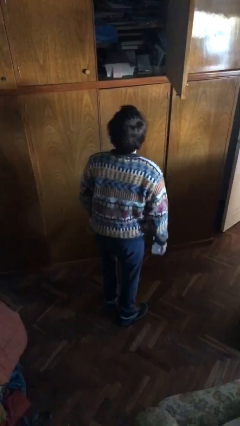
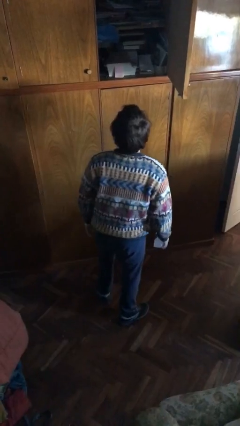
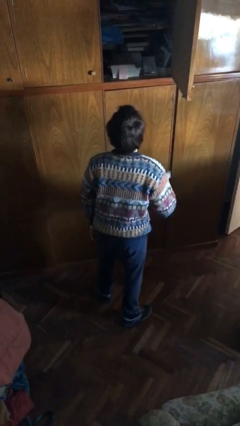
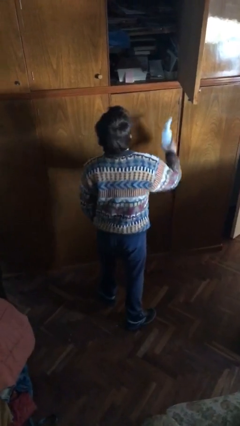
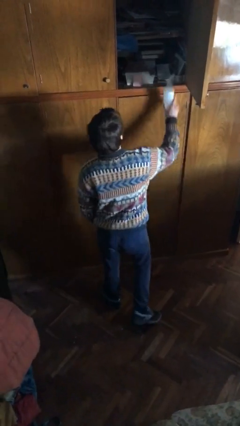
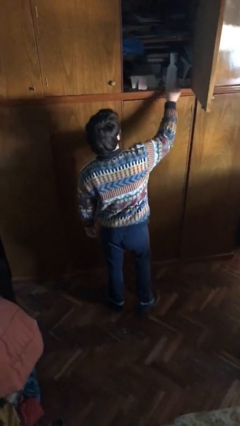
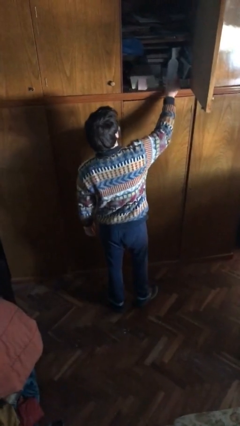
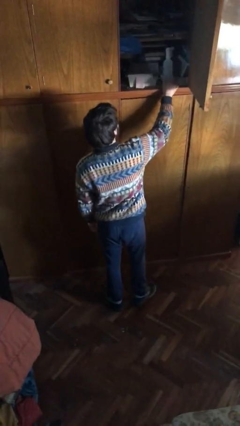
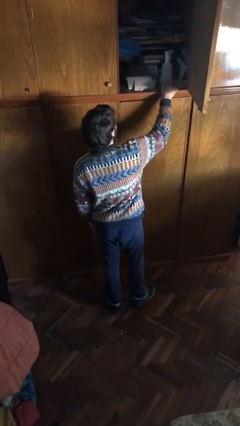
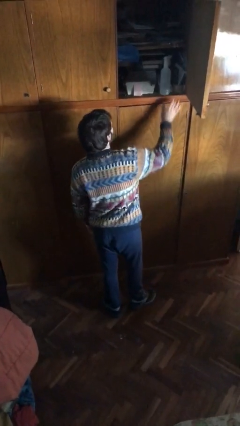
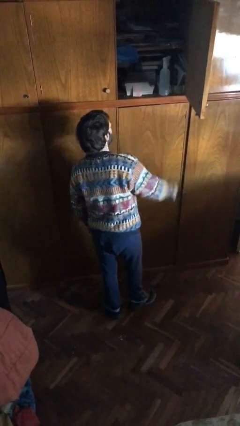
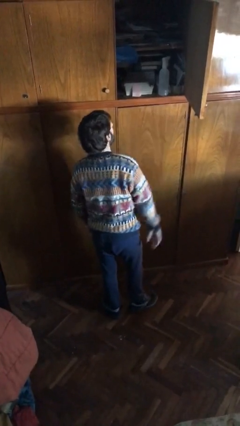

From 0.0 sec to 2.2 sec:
person puts down object into cabinet

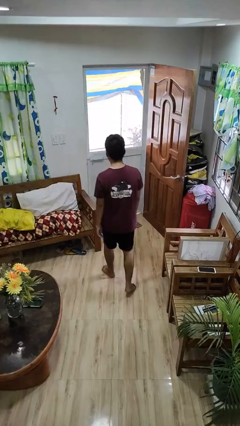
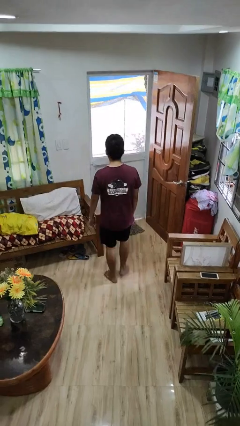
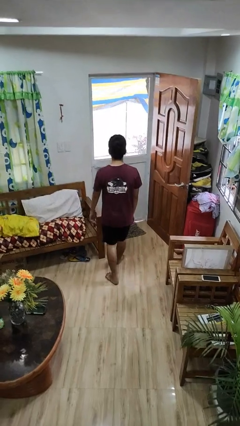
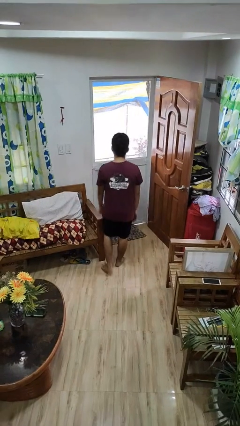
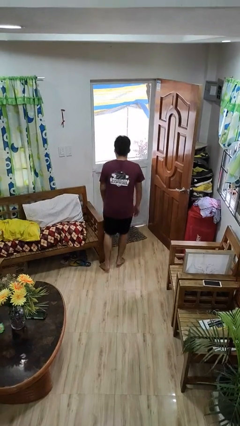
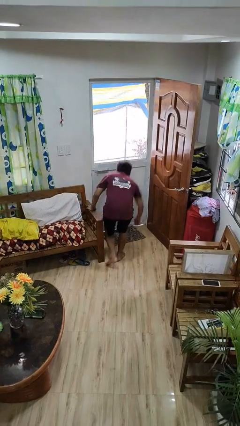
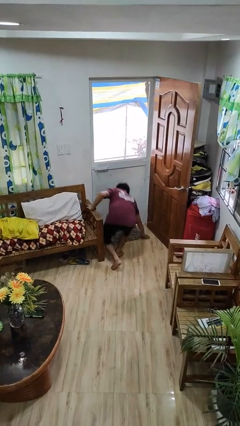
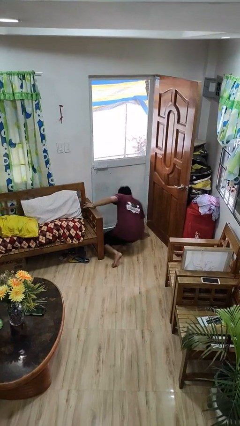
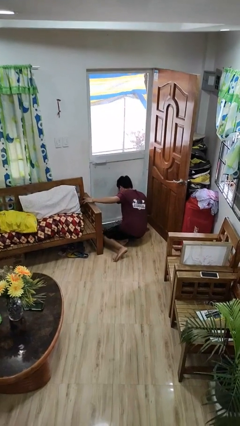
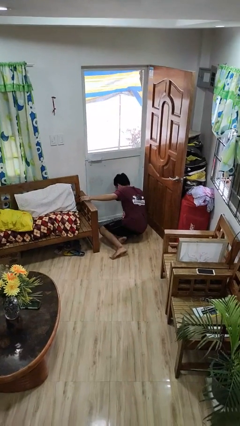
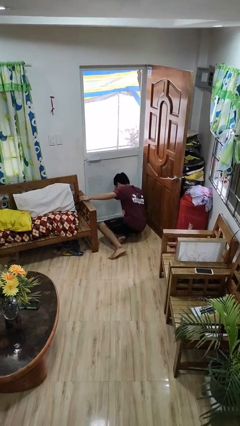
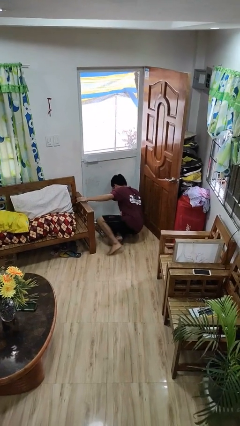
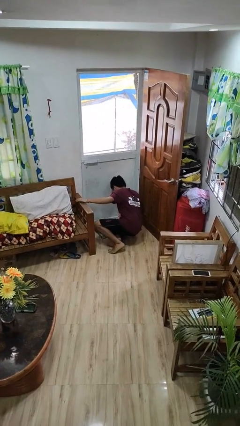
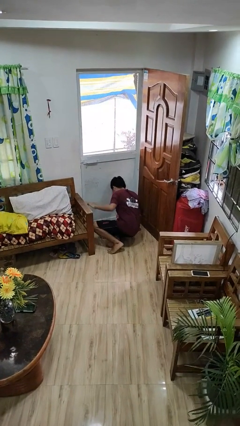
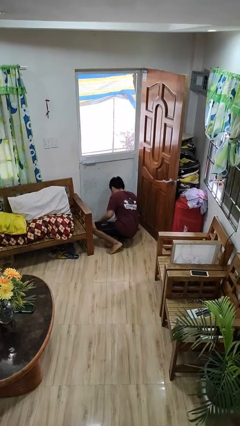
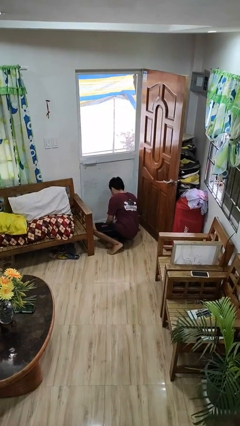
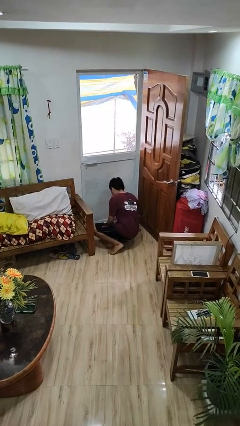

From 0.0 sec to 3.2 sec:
person trips on object on floor

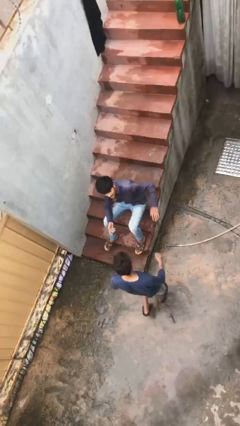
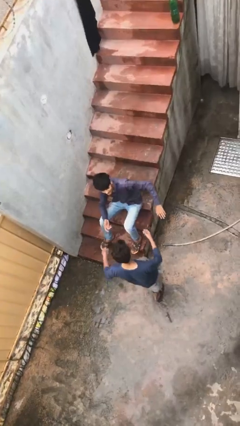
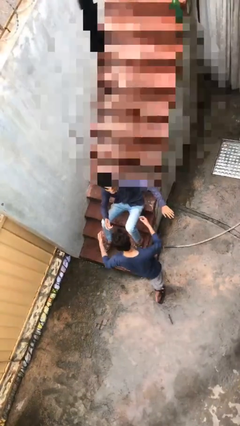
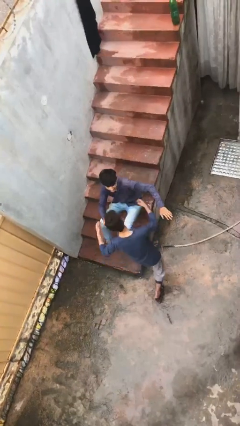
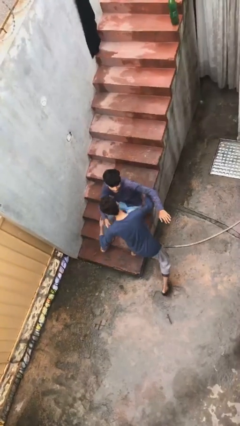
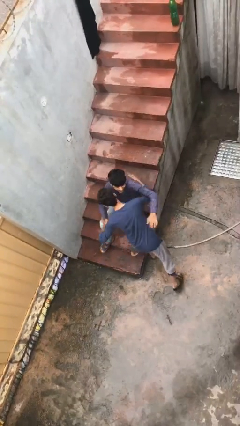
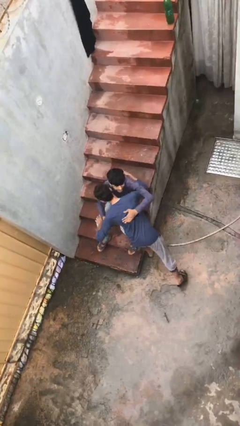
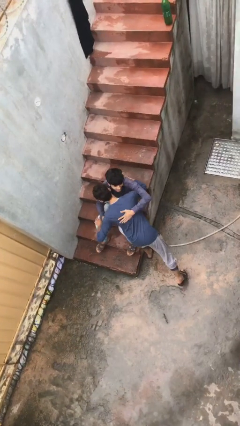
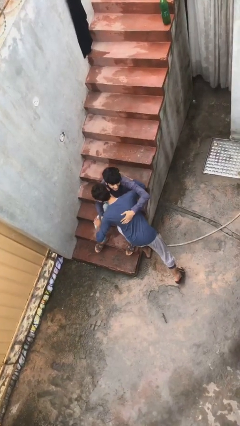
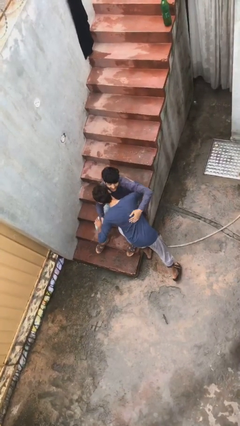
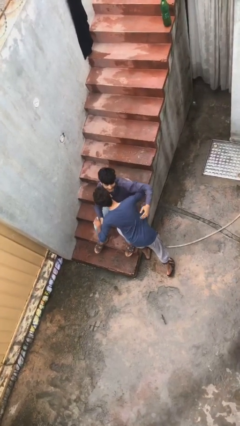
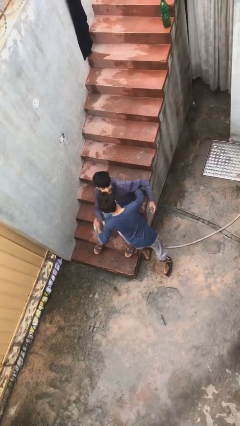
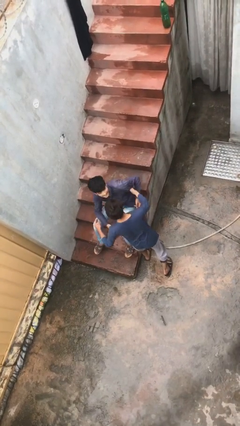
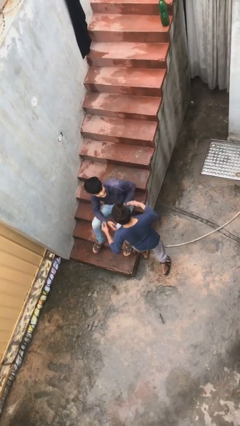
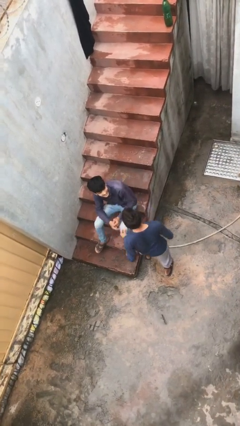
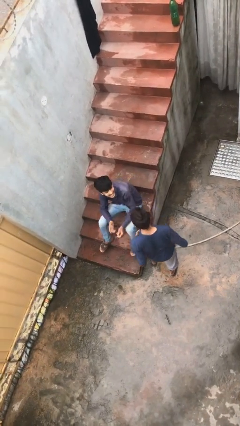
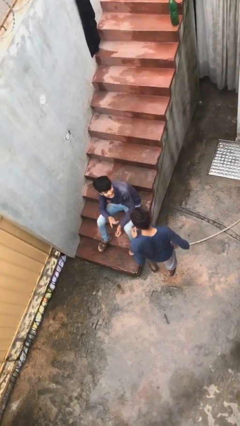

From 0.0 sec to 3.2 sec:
person embraces person

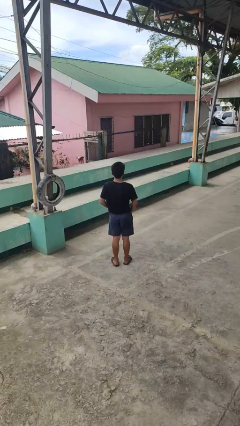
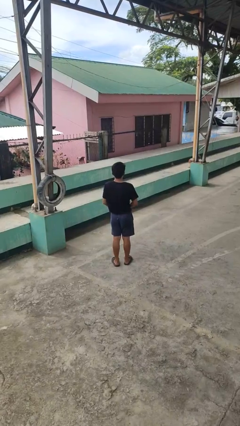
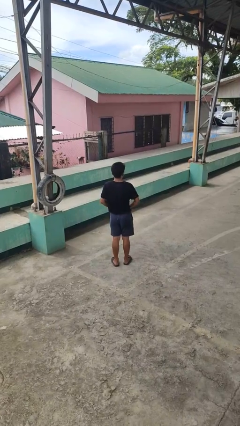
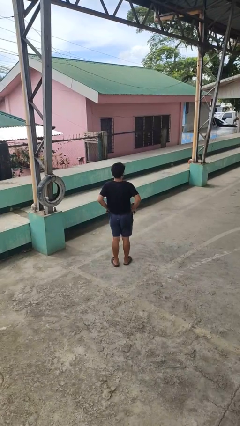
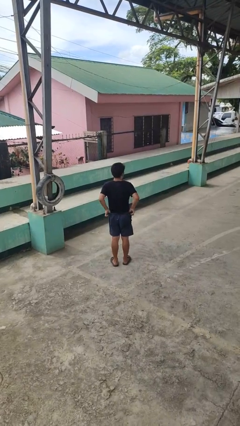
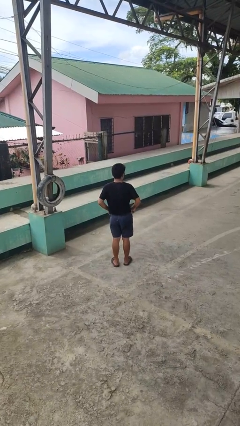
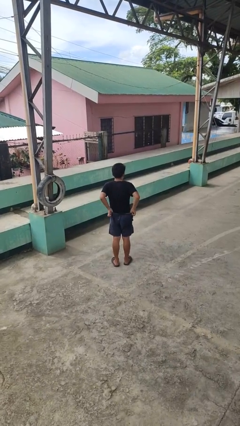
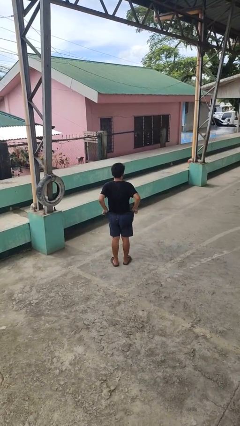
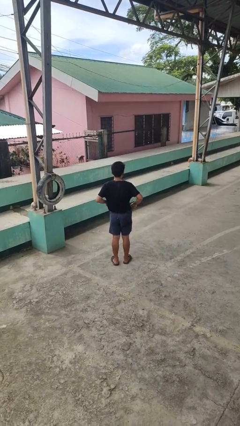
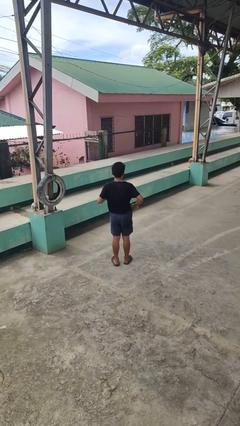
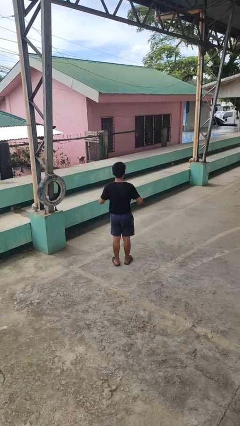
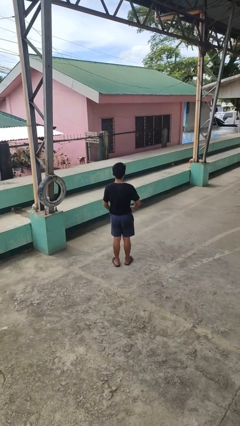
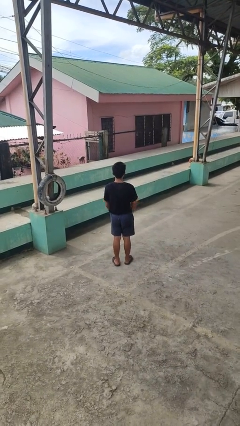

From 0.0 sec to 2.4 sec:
person hikes up pants

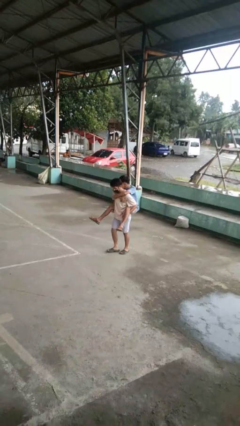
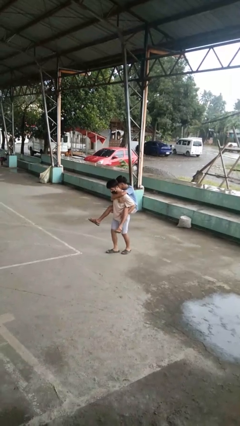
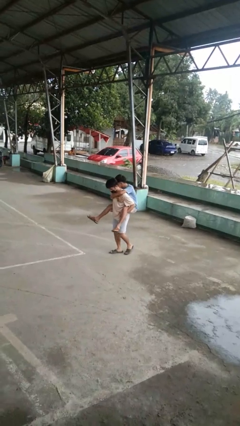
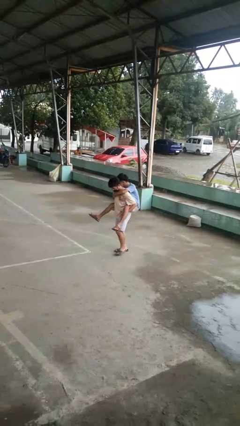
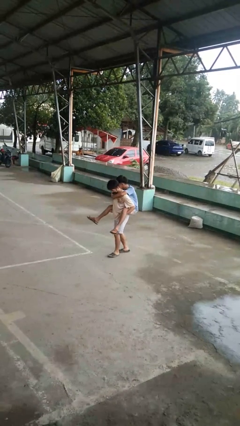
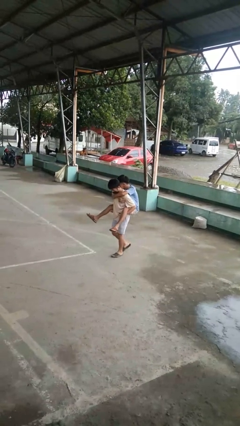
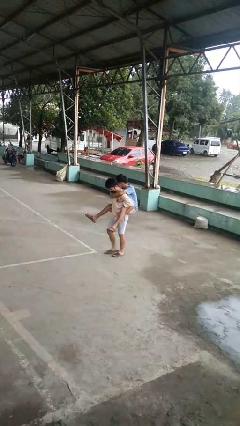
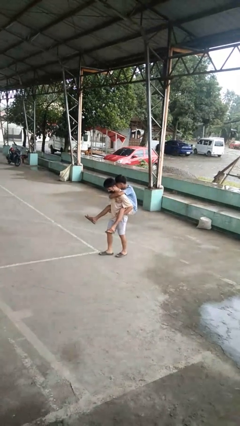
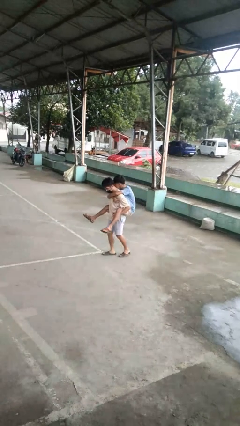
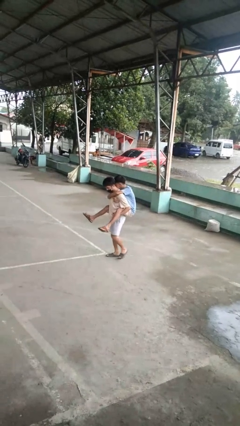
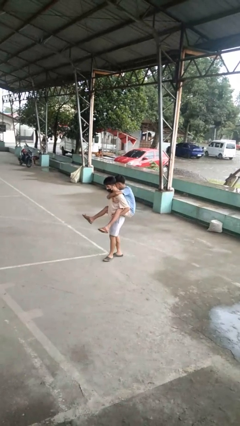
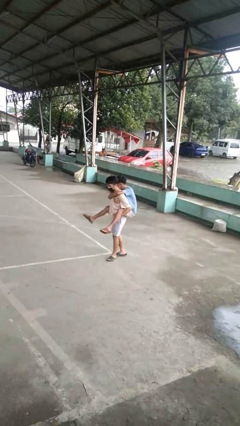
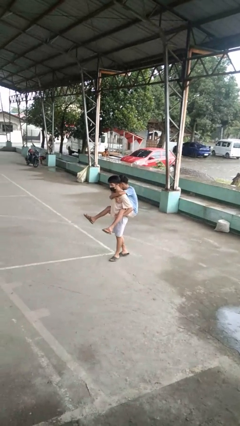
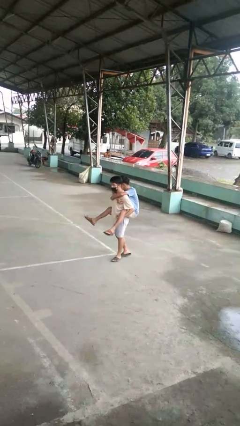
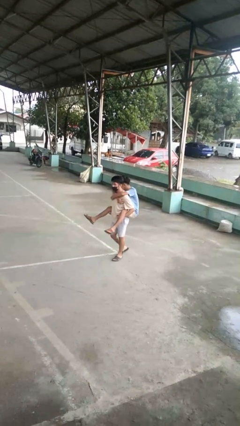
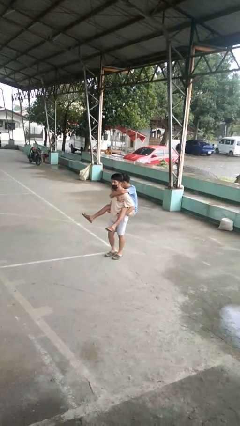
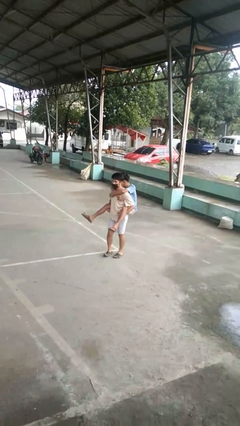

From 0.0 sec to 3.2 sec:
person carries person on back

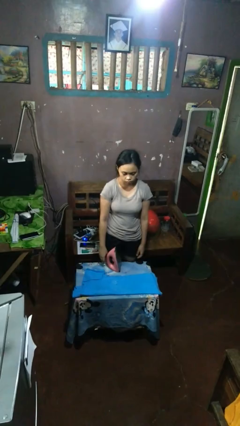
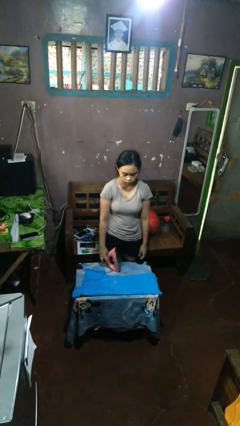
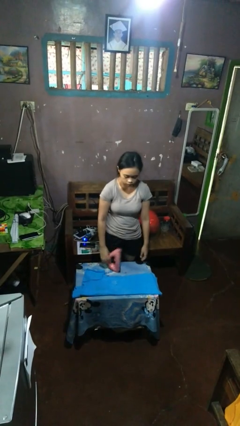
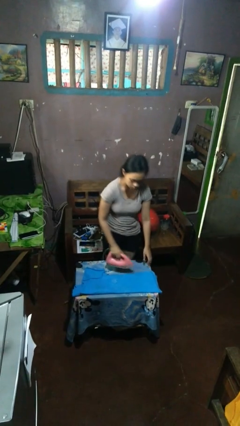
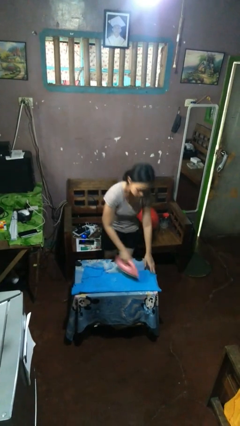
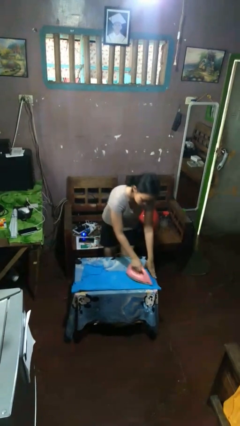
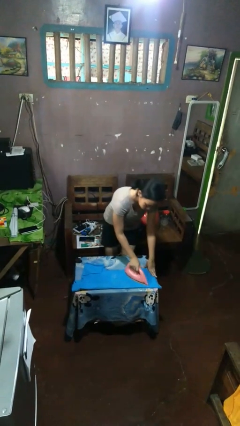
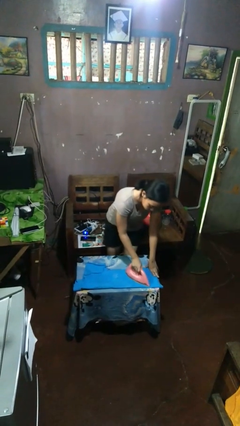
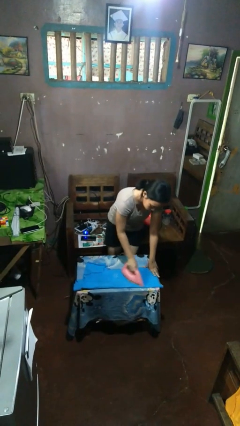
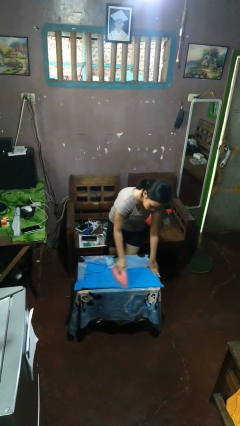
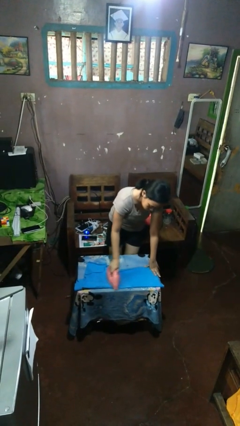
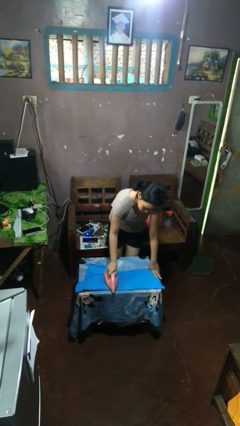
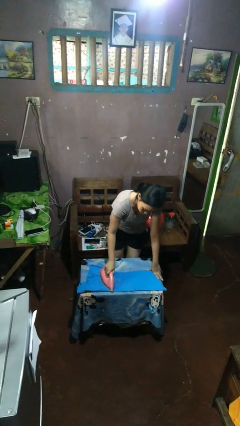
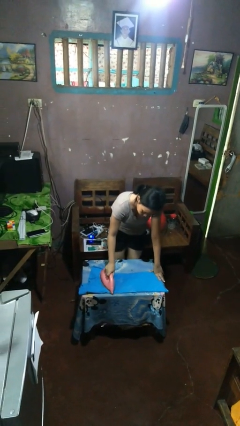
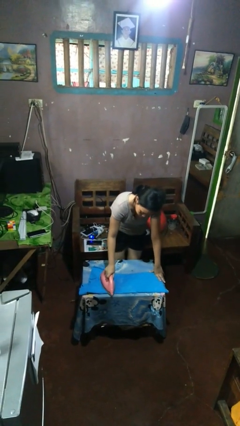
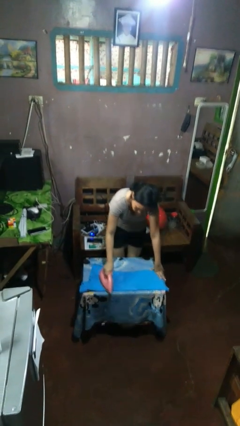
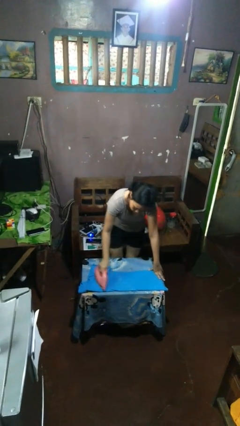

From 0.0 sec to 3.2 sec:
person irons clothes

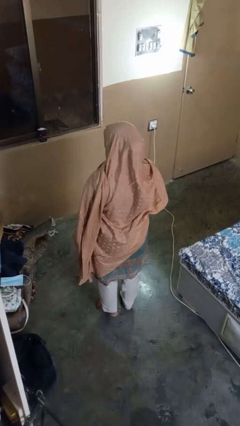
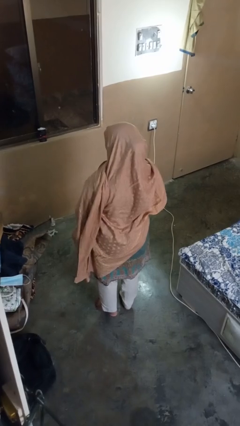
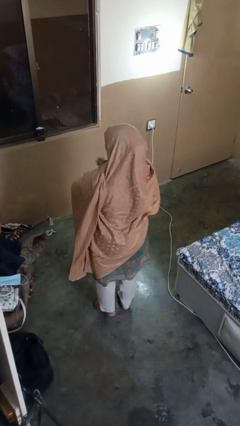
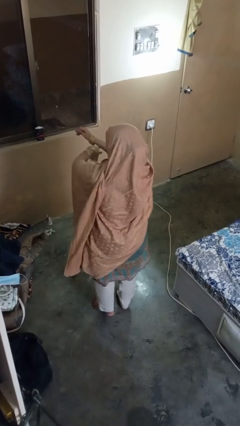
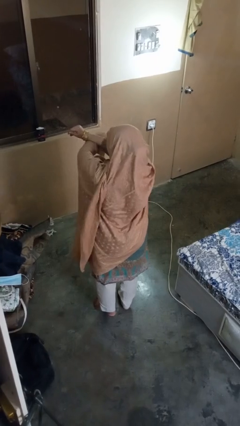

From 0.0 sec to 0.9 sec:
person crosses arms
